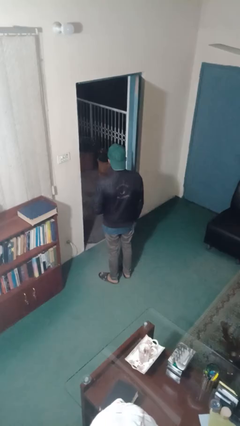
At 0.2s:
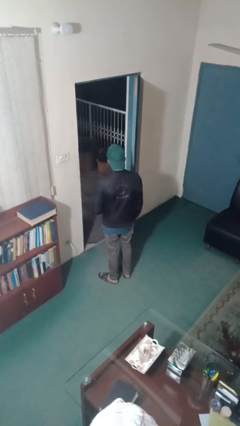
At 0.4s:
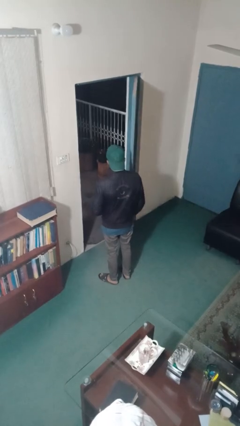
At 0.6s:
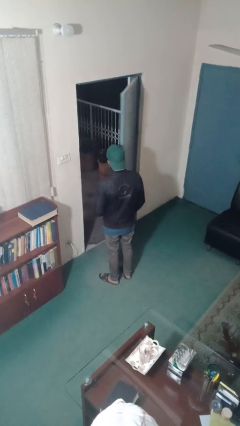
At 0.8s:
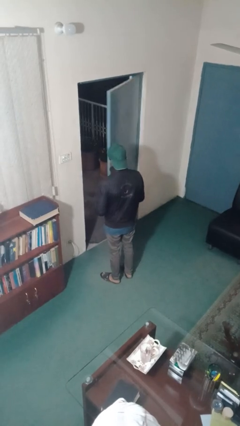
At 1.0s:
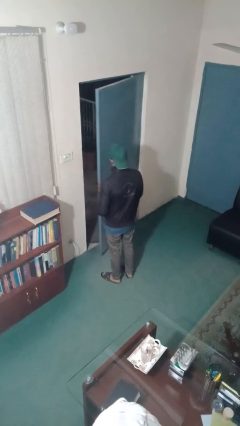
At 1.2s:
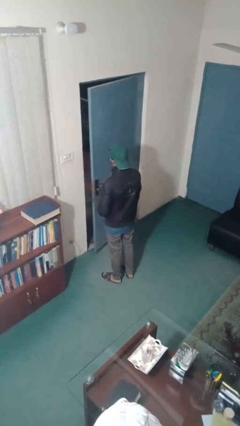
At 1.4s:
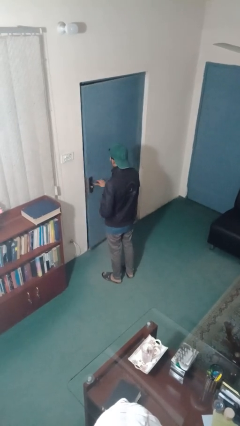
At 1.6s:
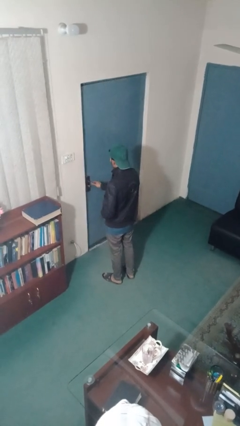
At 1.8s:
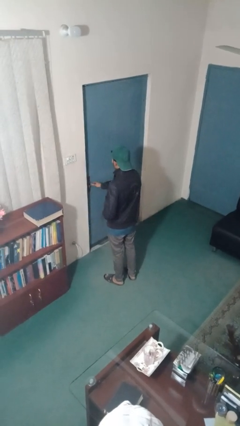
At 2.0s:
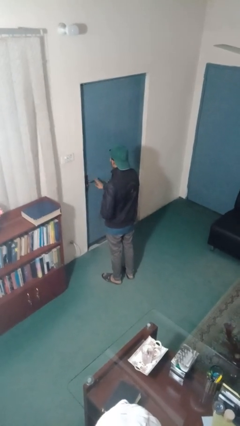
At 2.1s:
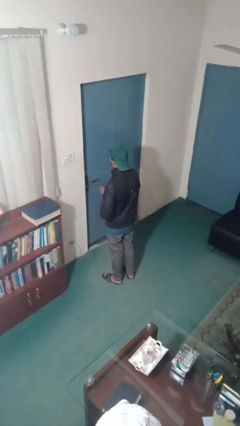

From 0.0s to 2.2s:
person closes facility door

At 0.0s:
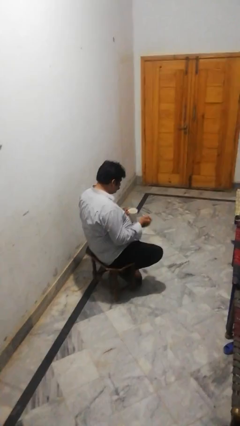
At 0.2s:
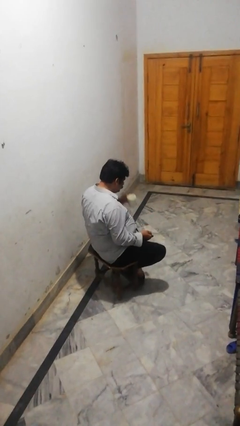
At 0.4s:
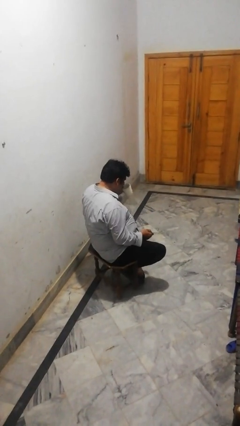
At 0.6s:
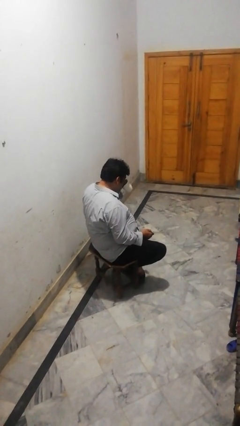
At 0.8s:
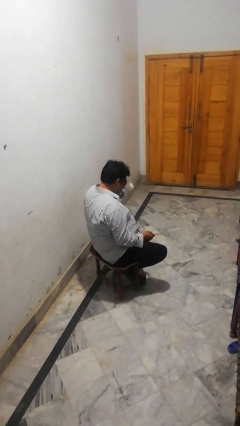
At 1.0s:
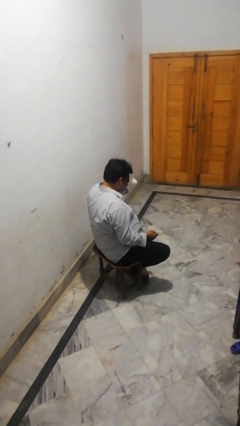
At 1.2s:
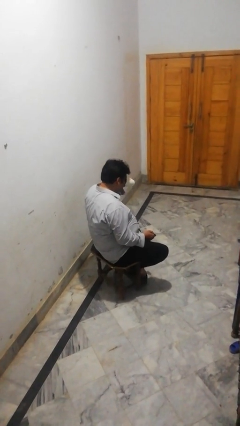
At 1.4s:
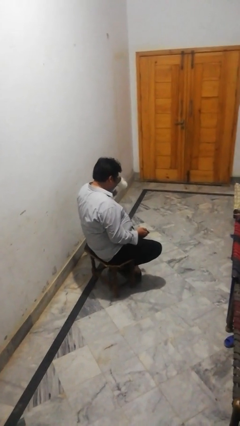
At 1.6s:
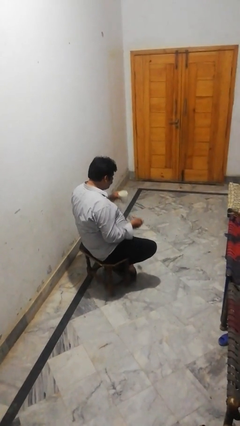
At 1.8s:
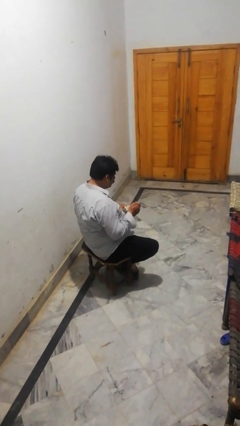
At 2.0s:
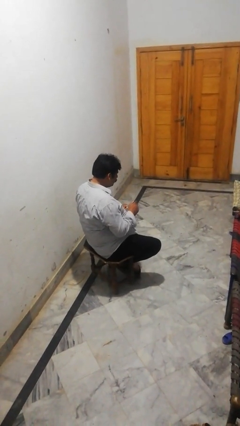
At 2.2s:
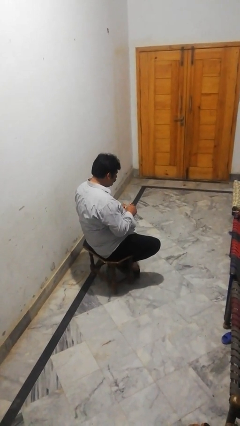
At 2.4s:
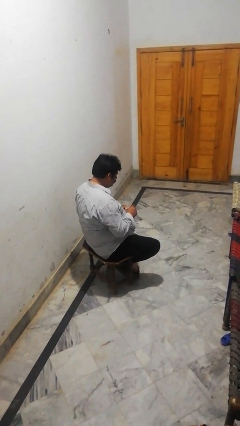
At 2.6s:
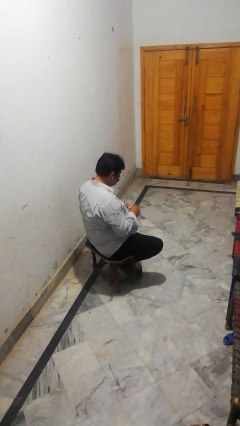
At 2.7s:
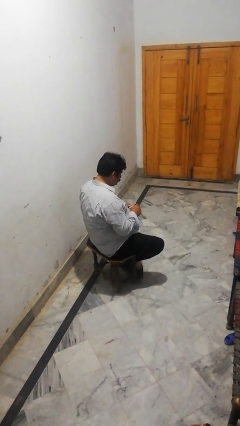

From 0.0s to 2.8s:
person drinks from mug

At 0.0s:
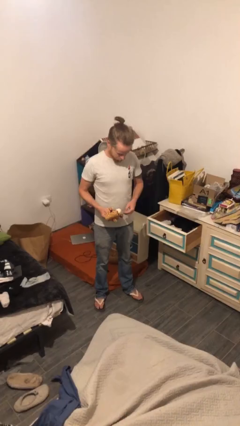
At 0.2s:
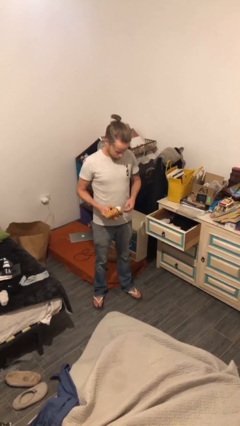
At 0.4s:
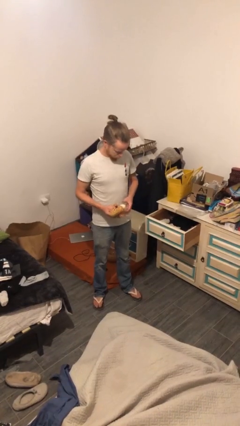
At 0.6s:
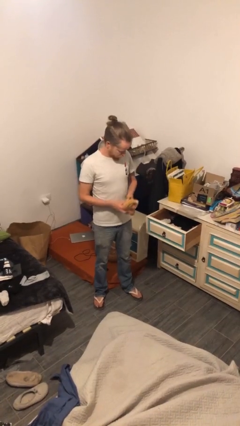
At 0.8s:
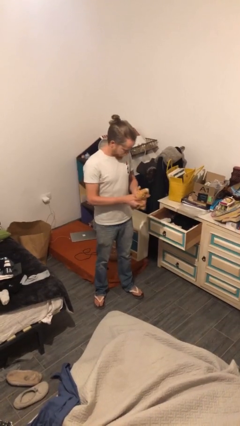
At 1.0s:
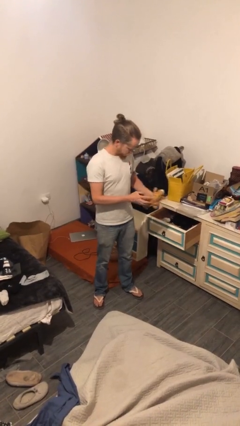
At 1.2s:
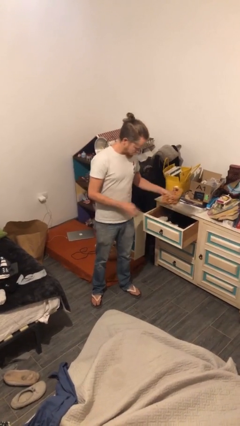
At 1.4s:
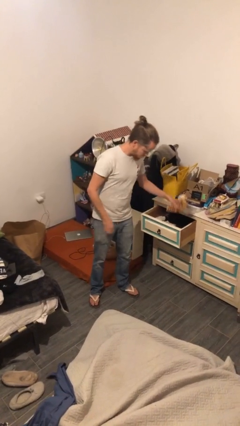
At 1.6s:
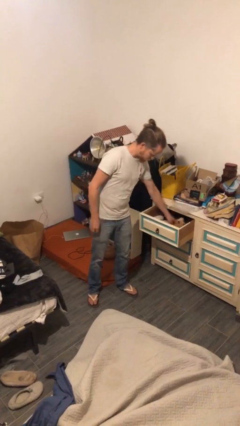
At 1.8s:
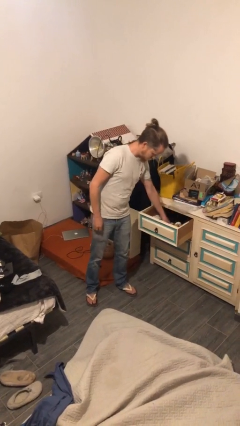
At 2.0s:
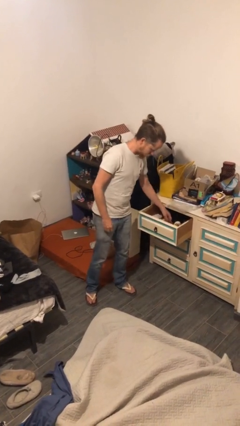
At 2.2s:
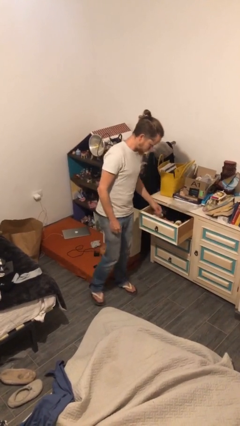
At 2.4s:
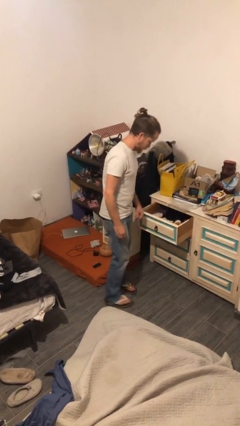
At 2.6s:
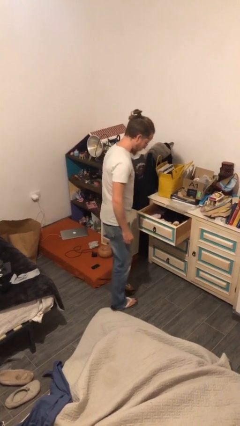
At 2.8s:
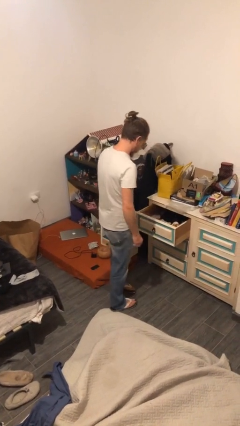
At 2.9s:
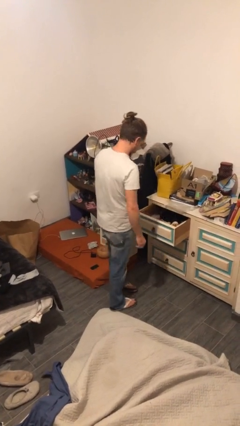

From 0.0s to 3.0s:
person puts down object into cabinet

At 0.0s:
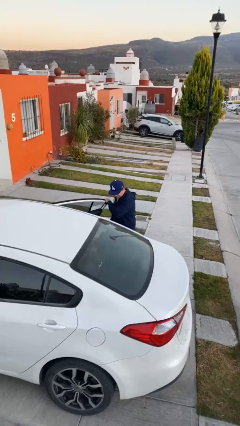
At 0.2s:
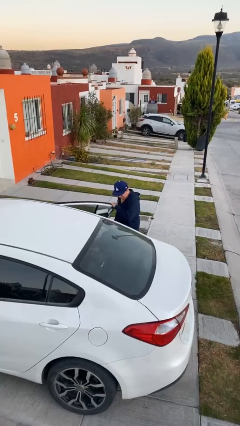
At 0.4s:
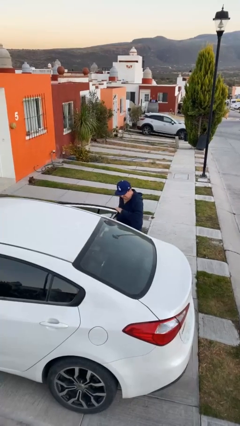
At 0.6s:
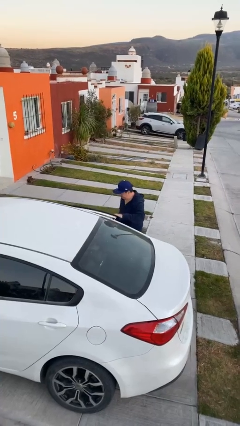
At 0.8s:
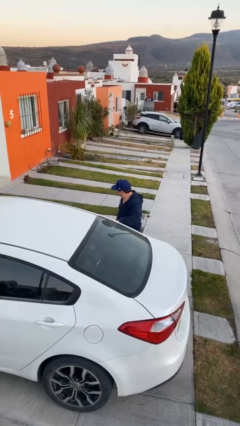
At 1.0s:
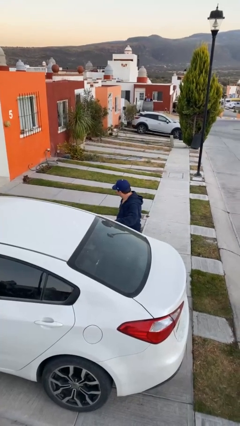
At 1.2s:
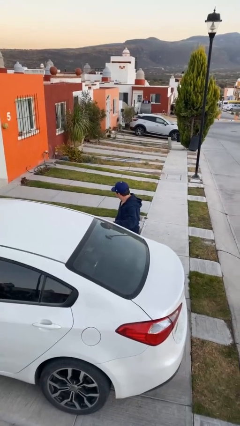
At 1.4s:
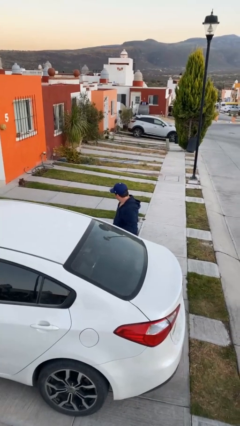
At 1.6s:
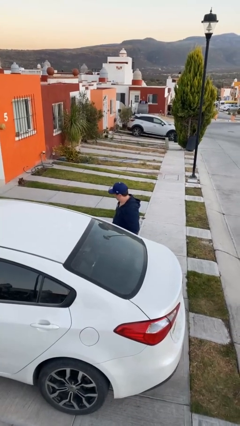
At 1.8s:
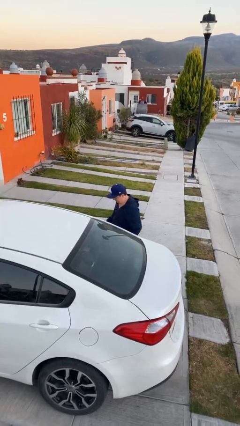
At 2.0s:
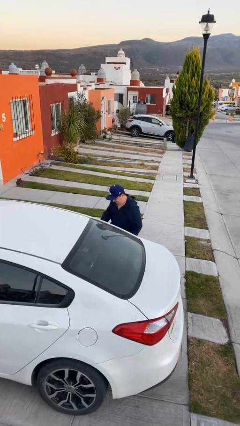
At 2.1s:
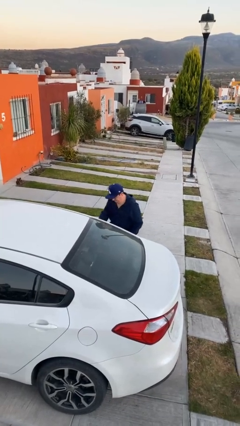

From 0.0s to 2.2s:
person closes car door

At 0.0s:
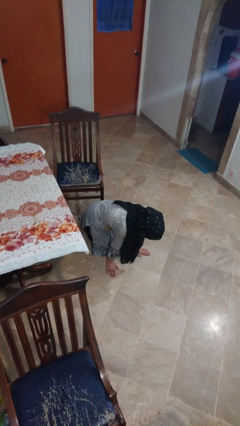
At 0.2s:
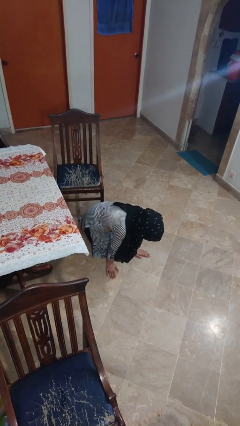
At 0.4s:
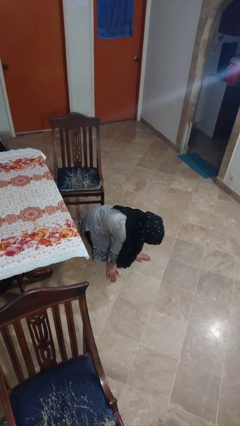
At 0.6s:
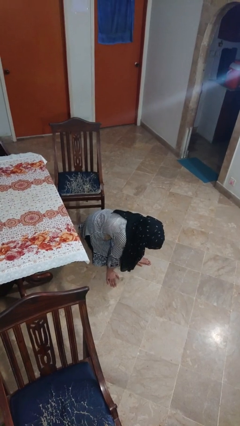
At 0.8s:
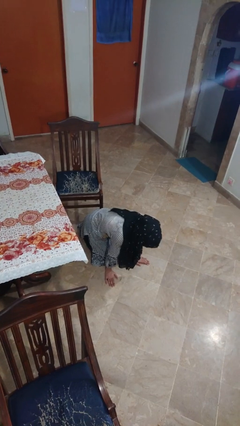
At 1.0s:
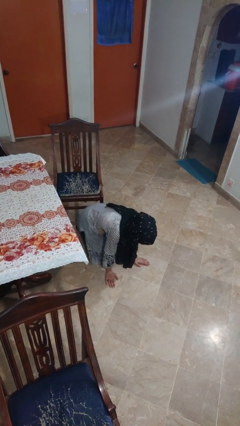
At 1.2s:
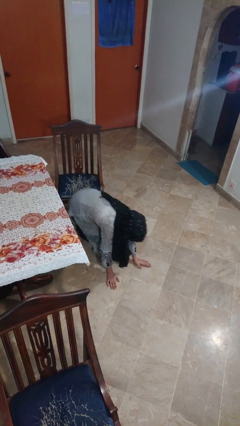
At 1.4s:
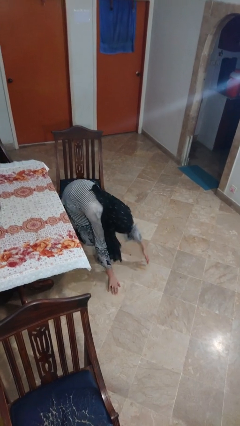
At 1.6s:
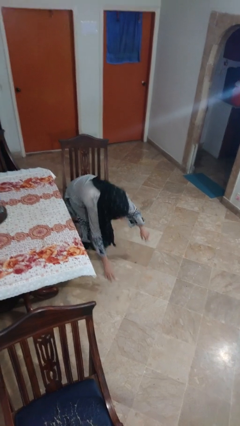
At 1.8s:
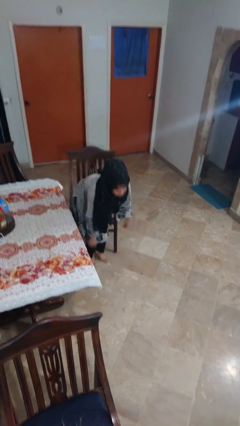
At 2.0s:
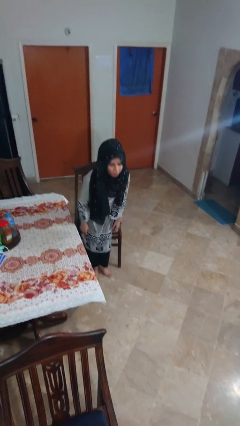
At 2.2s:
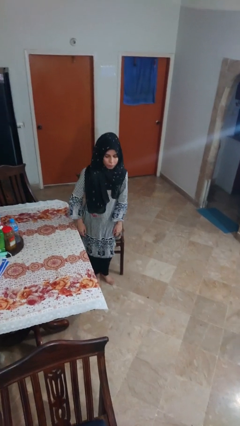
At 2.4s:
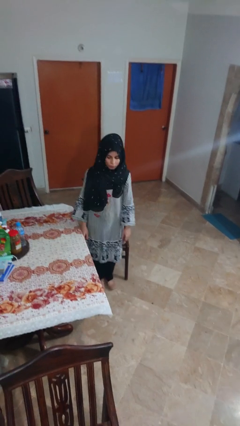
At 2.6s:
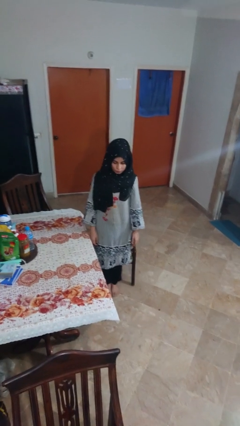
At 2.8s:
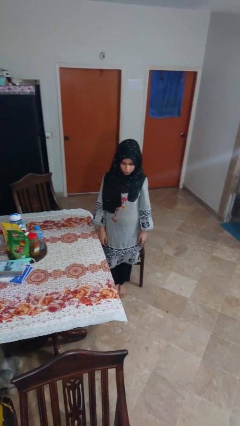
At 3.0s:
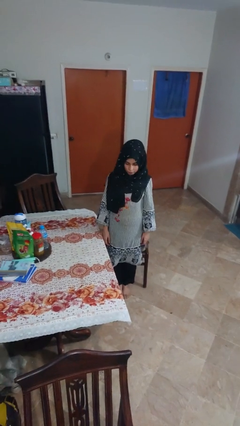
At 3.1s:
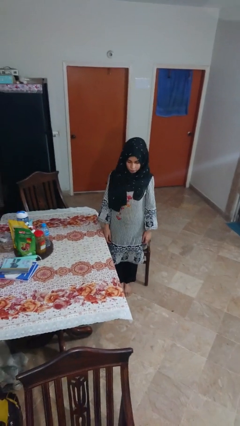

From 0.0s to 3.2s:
person stands up from floor

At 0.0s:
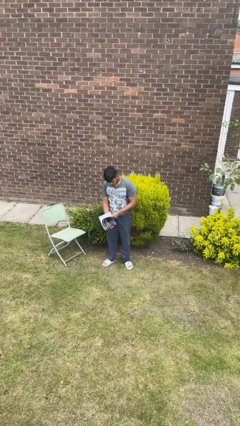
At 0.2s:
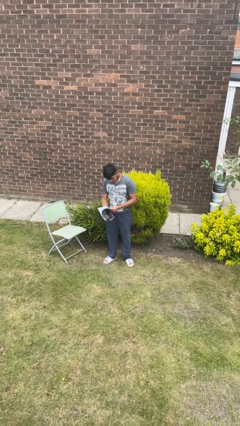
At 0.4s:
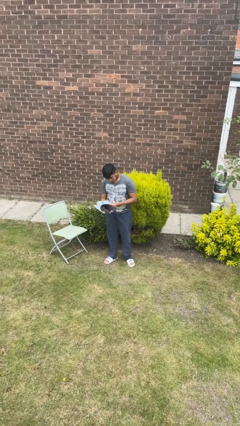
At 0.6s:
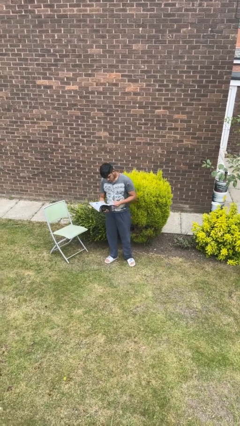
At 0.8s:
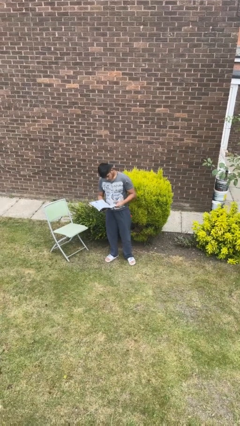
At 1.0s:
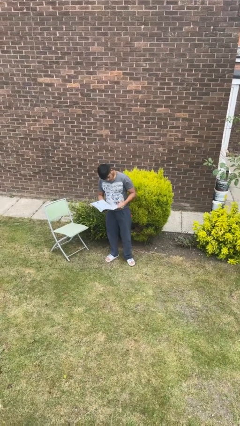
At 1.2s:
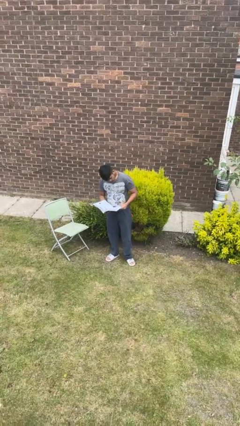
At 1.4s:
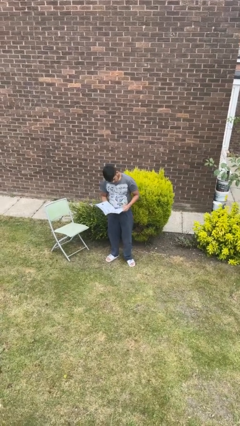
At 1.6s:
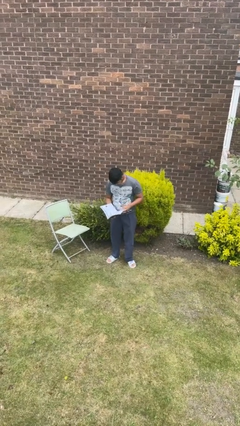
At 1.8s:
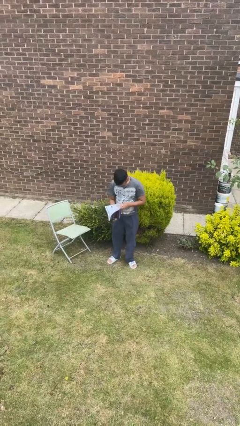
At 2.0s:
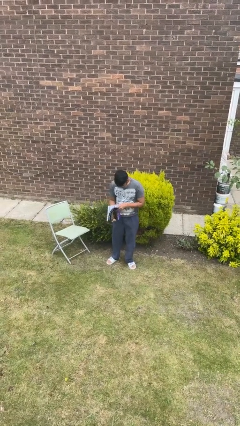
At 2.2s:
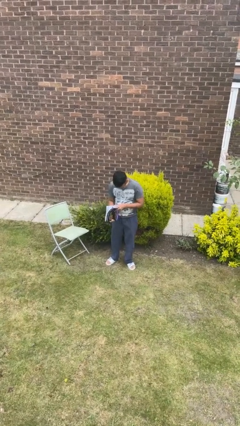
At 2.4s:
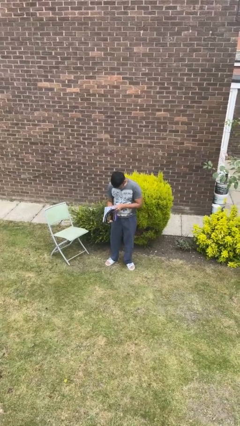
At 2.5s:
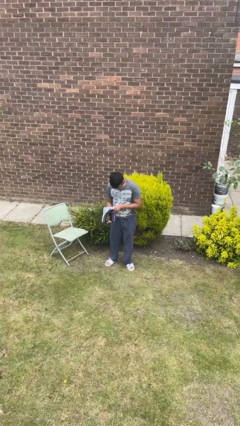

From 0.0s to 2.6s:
person reads book

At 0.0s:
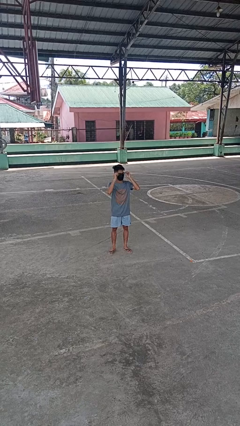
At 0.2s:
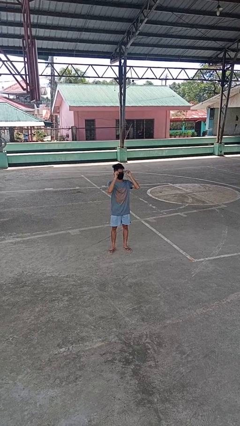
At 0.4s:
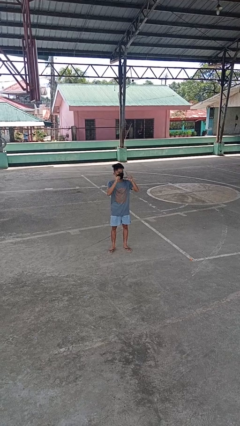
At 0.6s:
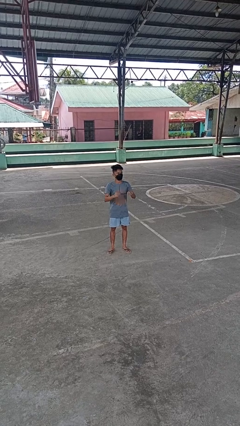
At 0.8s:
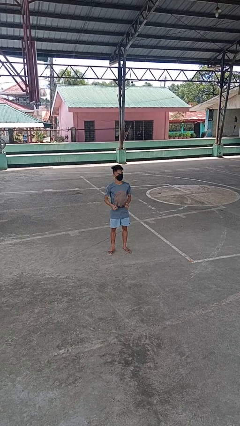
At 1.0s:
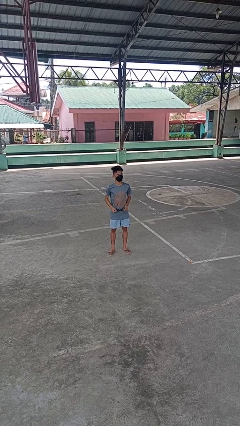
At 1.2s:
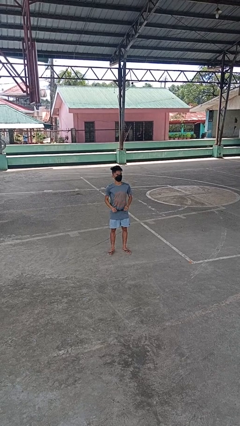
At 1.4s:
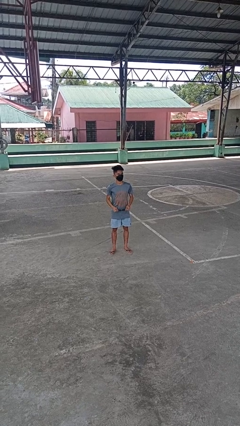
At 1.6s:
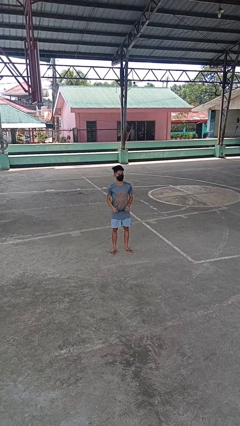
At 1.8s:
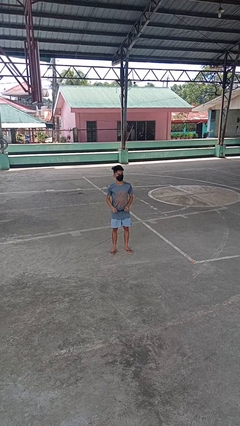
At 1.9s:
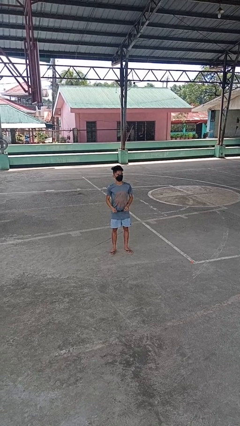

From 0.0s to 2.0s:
person takes off glasses
